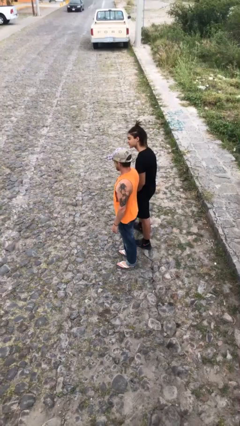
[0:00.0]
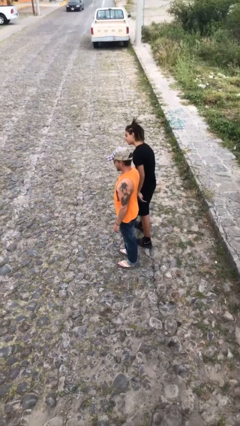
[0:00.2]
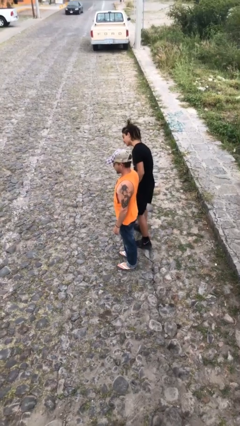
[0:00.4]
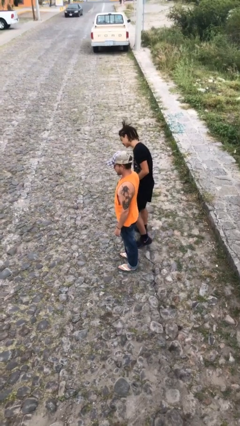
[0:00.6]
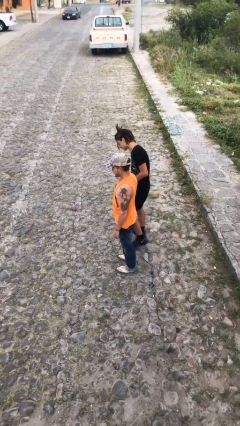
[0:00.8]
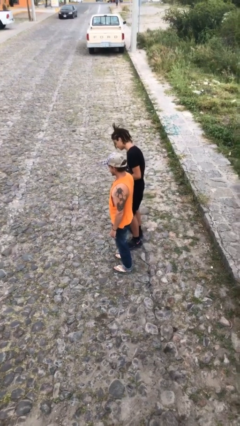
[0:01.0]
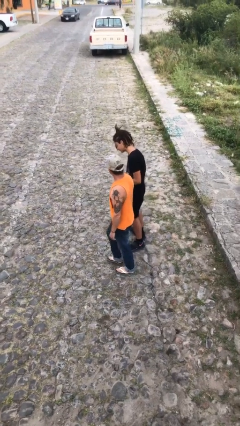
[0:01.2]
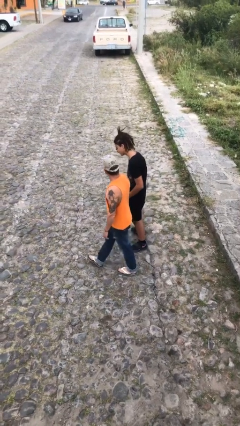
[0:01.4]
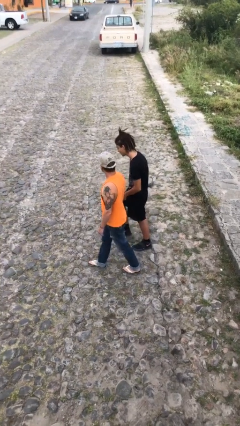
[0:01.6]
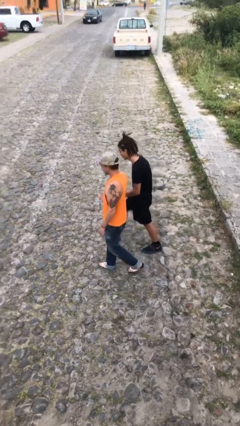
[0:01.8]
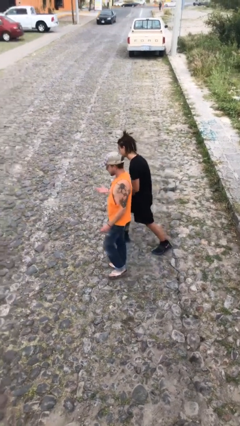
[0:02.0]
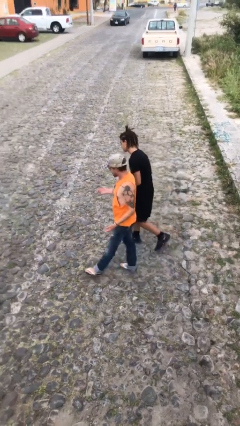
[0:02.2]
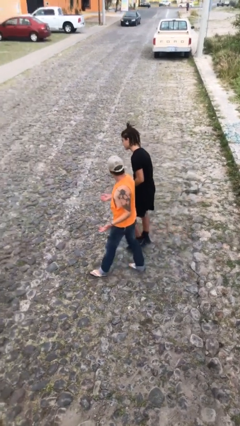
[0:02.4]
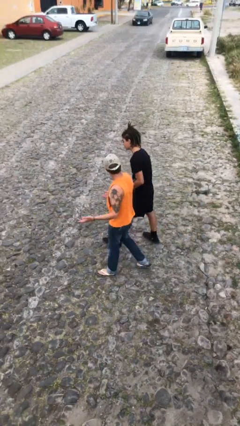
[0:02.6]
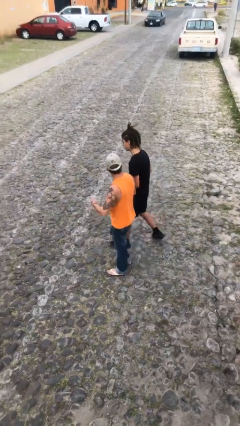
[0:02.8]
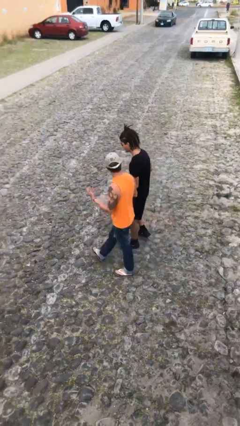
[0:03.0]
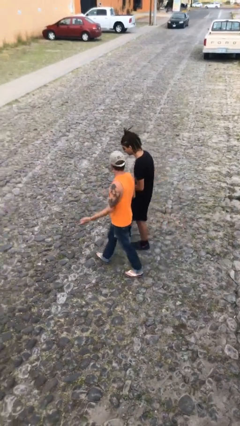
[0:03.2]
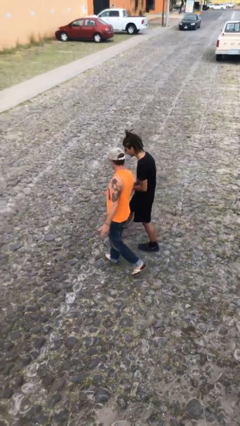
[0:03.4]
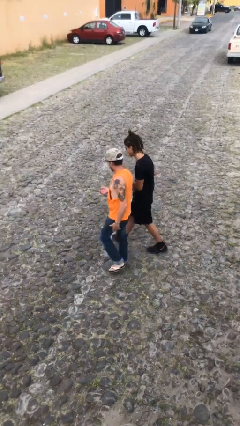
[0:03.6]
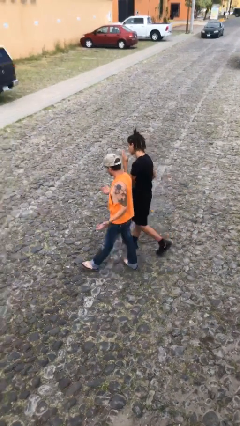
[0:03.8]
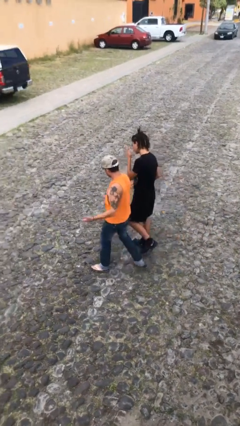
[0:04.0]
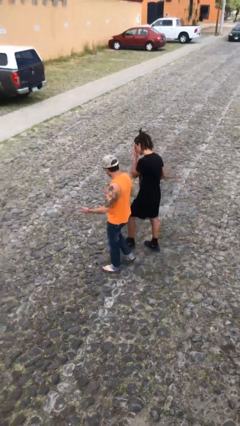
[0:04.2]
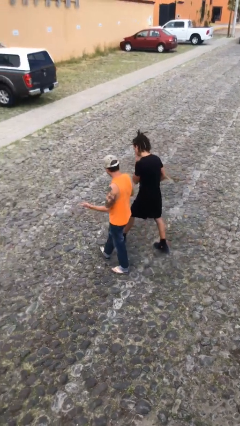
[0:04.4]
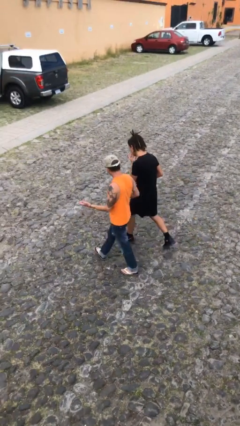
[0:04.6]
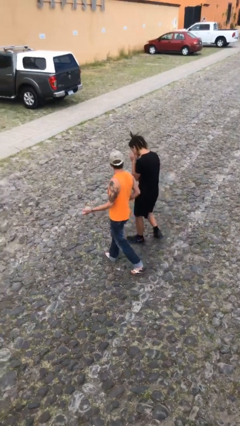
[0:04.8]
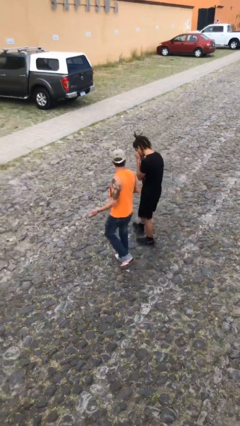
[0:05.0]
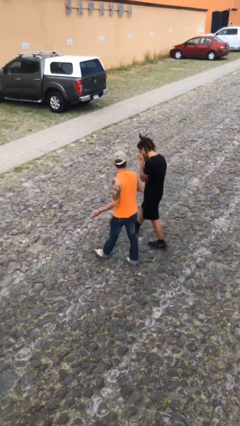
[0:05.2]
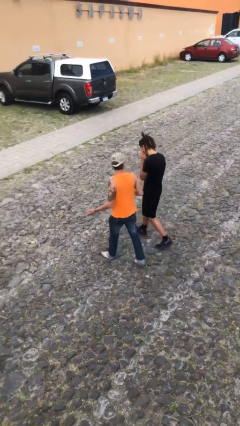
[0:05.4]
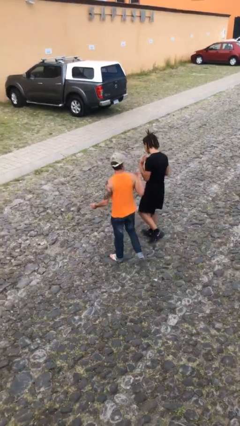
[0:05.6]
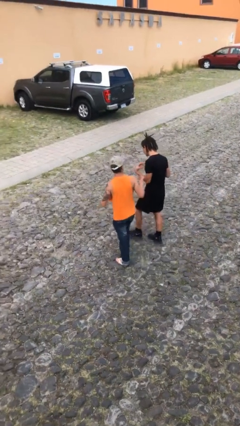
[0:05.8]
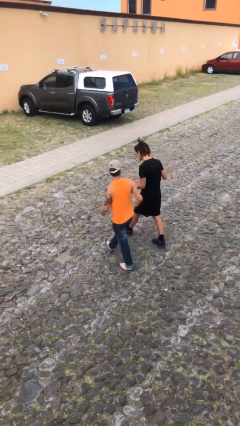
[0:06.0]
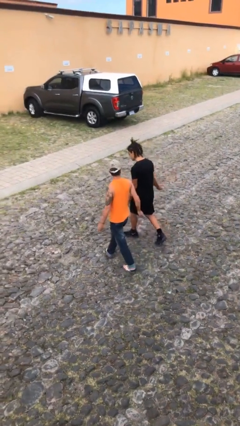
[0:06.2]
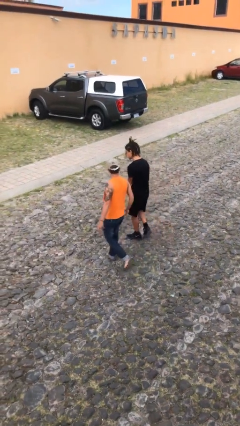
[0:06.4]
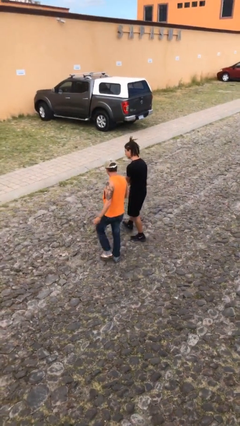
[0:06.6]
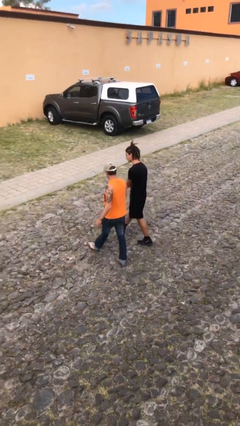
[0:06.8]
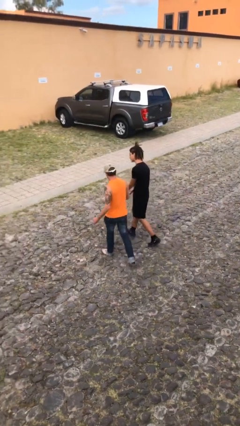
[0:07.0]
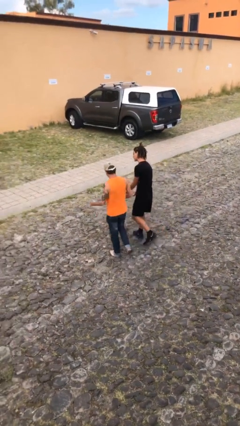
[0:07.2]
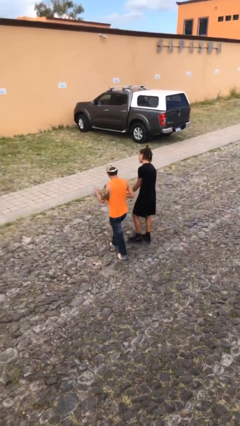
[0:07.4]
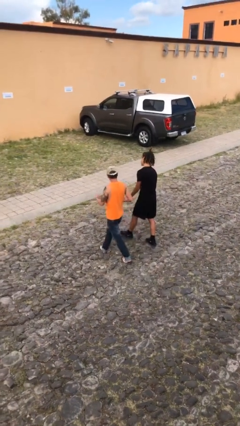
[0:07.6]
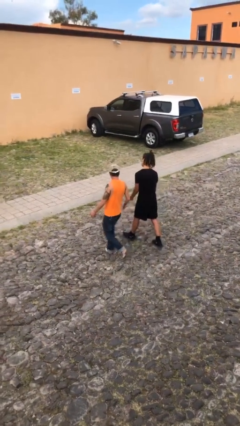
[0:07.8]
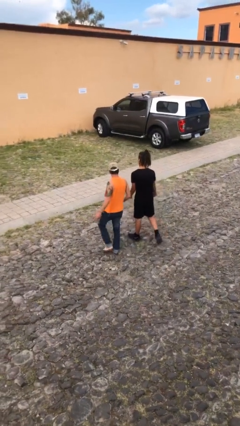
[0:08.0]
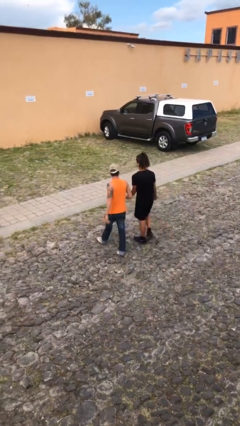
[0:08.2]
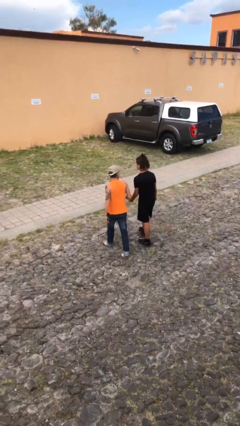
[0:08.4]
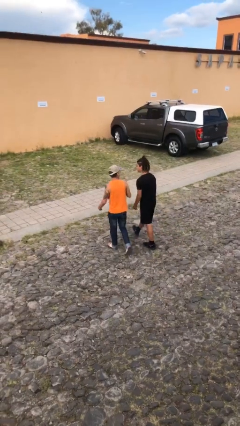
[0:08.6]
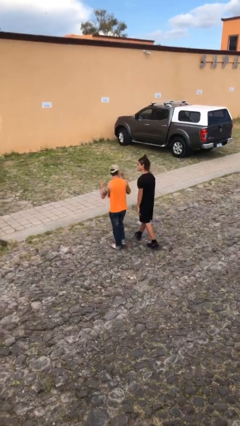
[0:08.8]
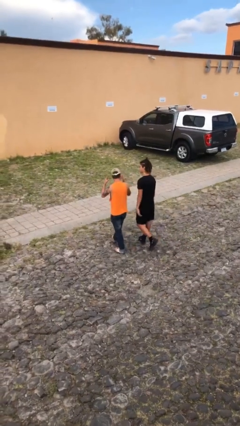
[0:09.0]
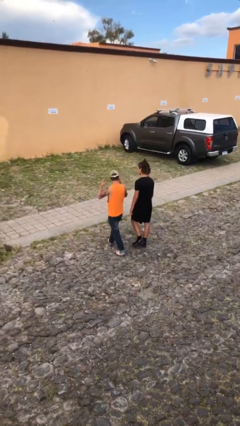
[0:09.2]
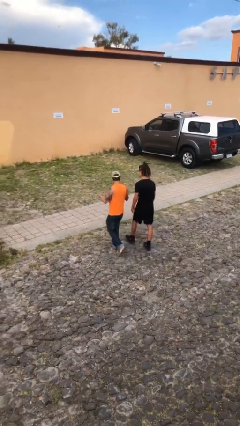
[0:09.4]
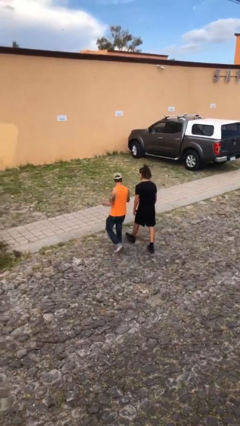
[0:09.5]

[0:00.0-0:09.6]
person talks to person

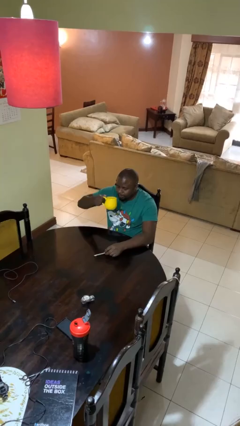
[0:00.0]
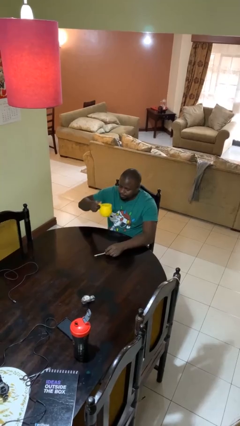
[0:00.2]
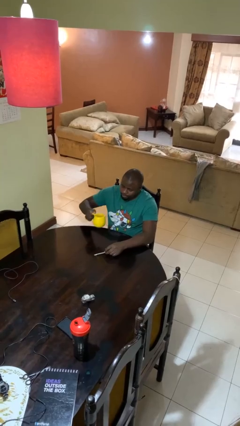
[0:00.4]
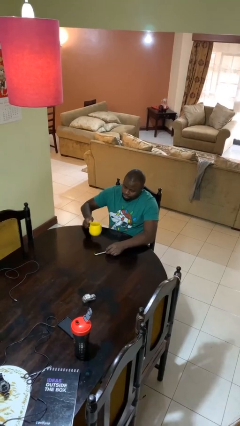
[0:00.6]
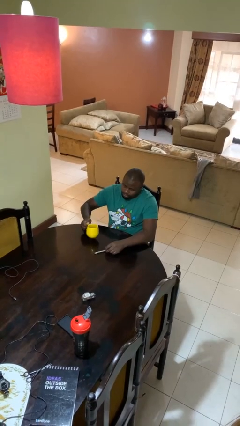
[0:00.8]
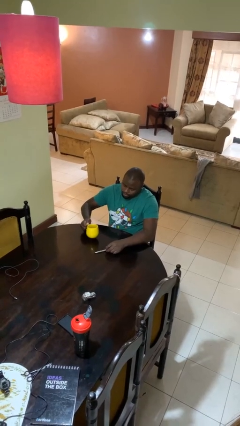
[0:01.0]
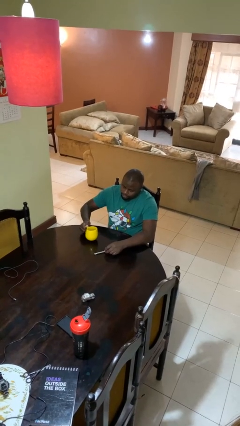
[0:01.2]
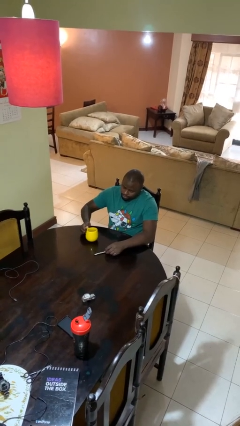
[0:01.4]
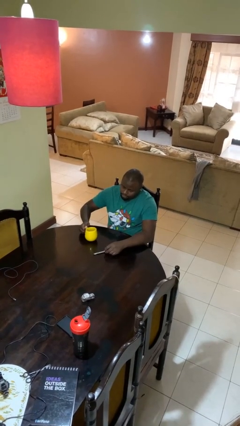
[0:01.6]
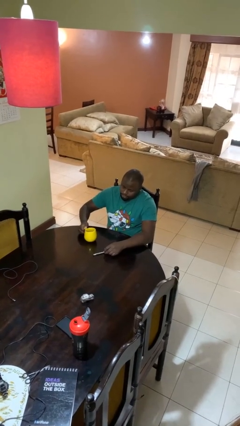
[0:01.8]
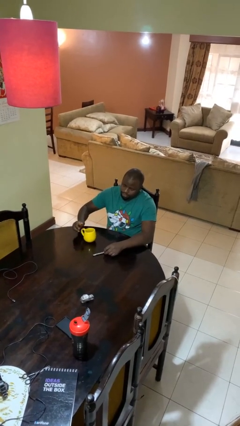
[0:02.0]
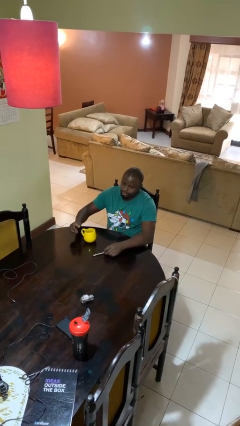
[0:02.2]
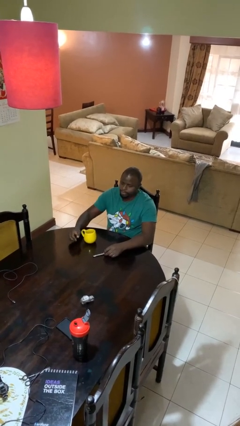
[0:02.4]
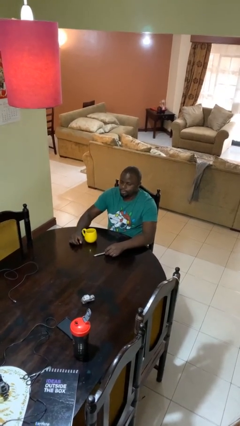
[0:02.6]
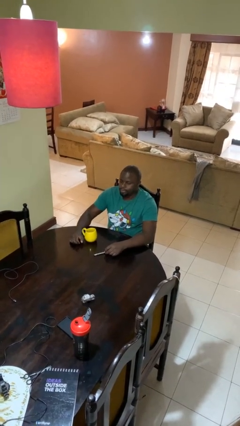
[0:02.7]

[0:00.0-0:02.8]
person puts down object on table

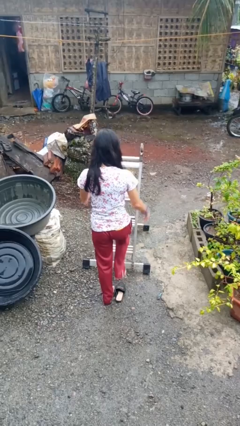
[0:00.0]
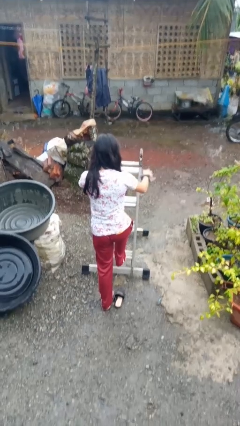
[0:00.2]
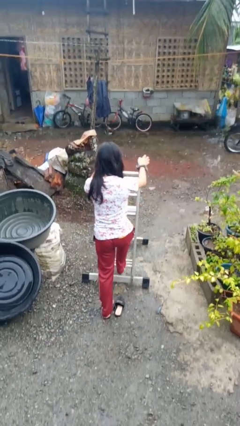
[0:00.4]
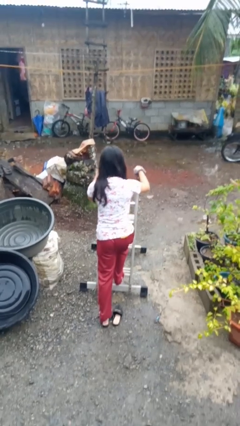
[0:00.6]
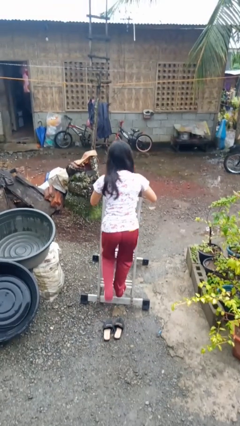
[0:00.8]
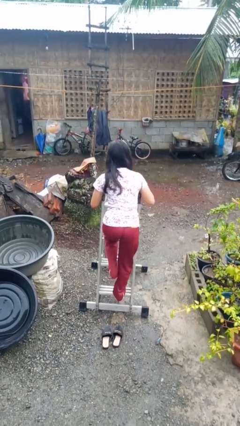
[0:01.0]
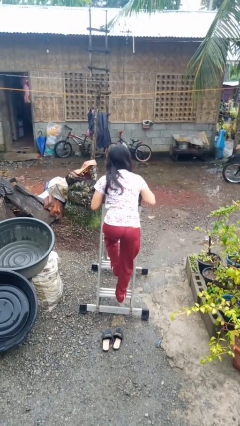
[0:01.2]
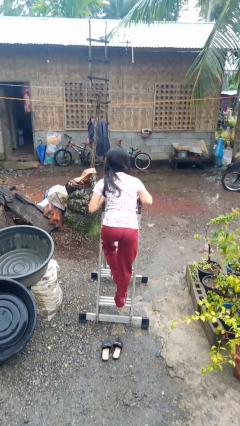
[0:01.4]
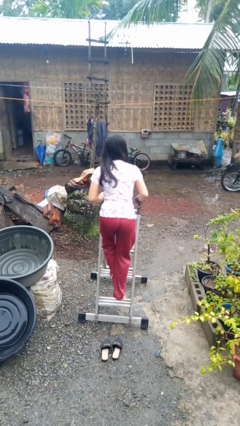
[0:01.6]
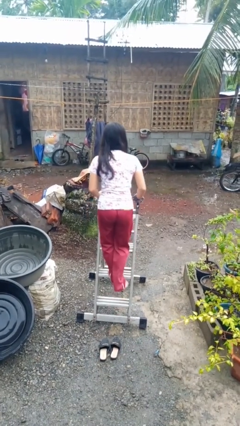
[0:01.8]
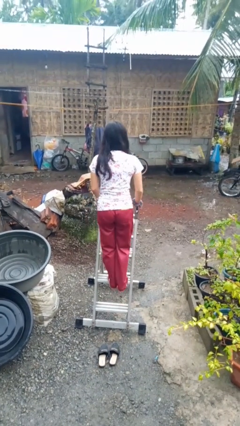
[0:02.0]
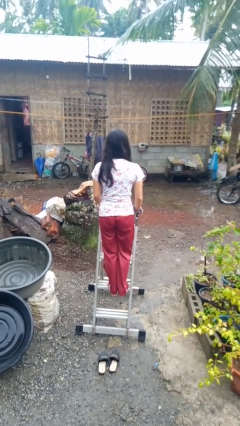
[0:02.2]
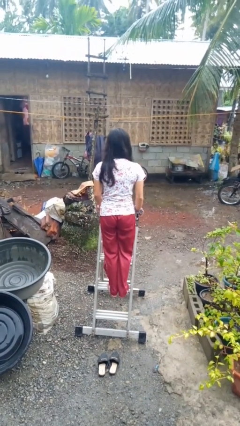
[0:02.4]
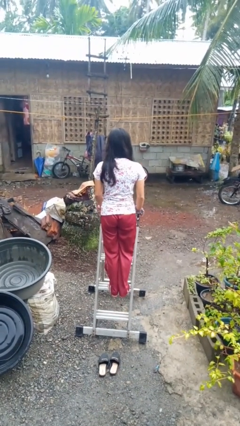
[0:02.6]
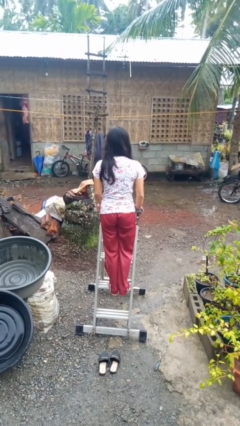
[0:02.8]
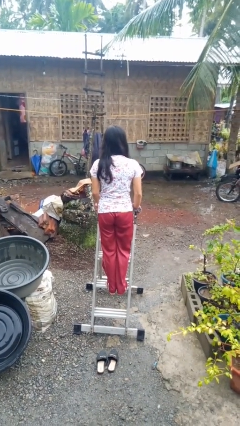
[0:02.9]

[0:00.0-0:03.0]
person climbs up ladder

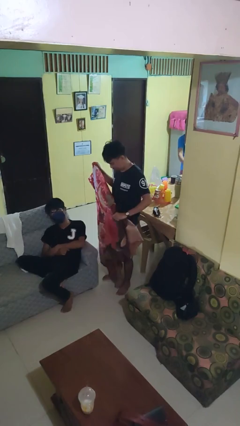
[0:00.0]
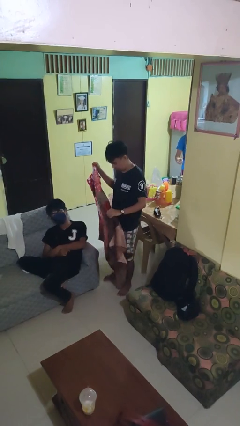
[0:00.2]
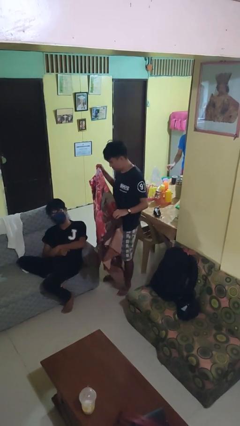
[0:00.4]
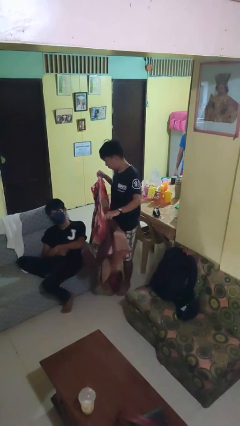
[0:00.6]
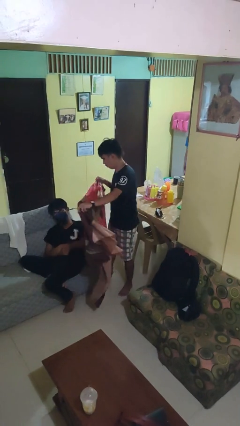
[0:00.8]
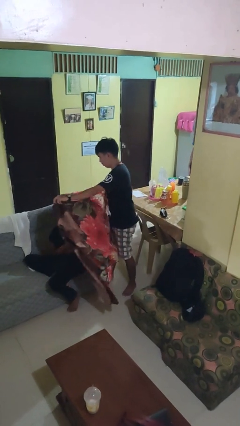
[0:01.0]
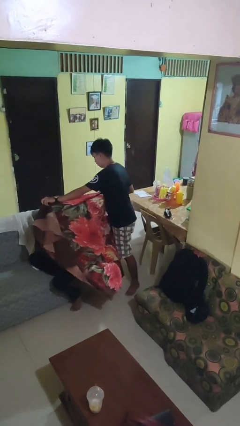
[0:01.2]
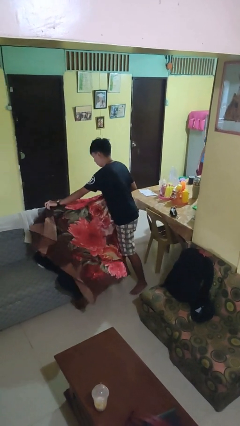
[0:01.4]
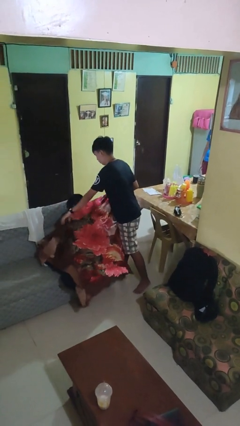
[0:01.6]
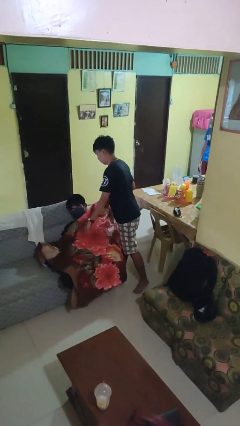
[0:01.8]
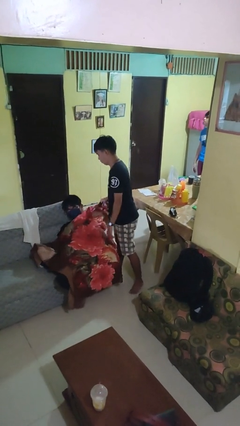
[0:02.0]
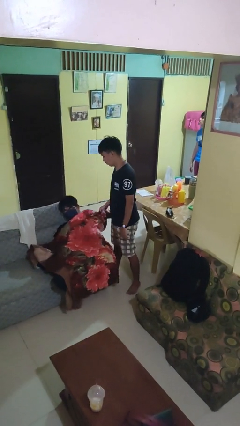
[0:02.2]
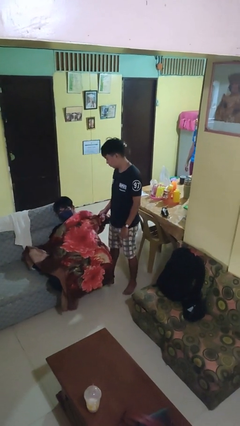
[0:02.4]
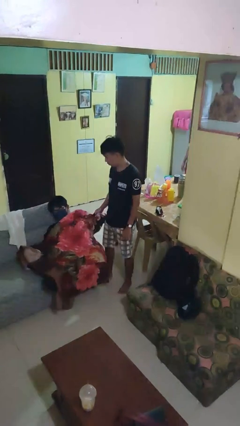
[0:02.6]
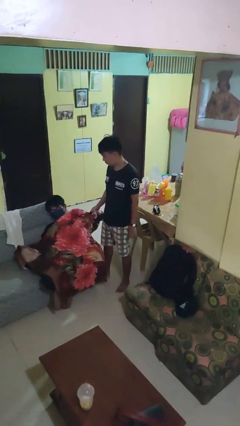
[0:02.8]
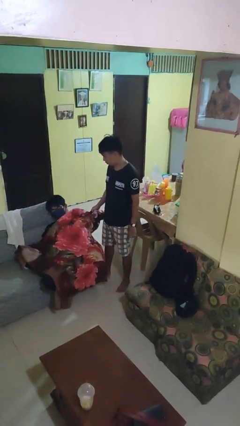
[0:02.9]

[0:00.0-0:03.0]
person covers friend with blanket
